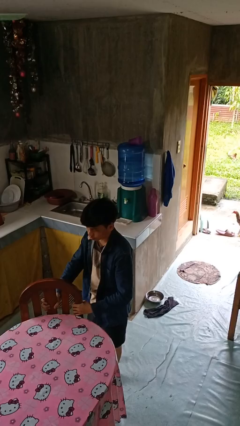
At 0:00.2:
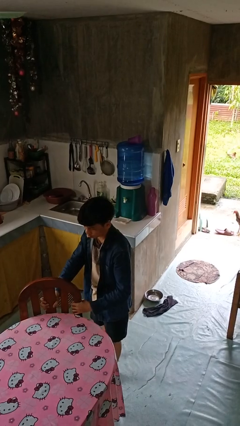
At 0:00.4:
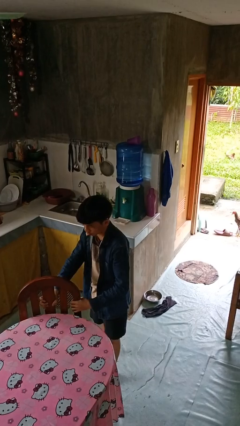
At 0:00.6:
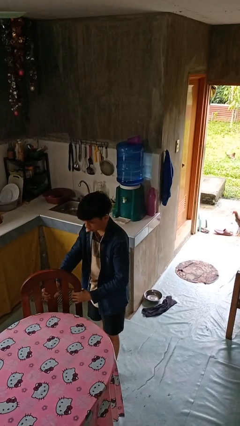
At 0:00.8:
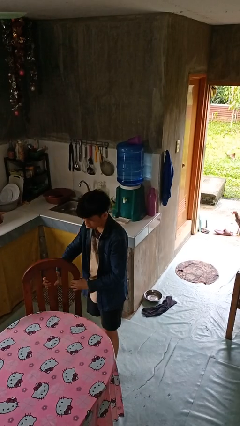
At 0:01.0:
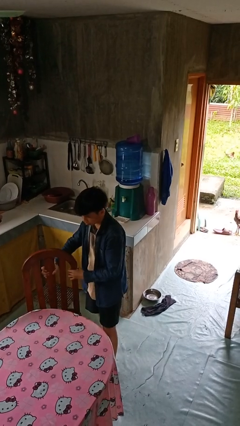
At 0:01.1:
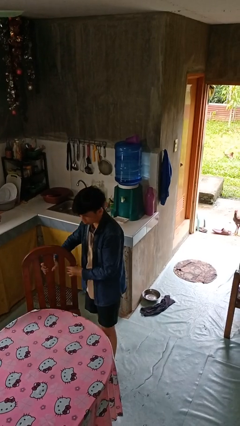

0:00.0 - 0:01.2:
person pulls out chair

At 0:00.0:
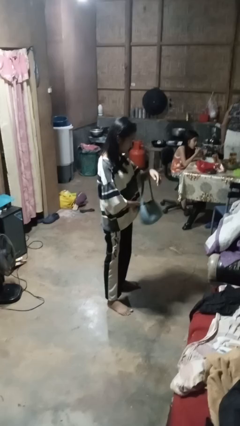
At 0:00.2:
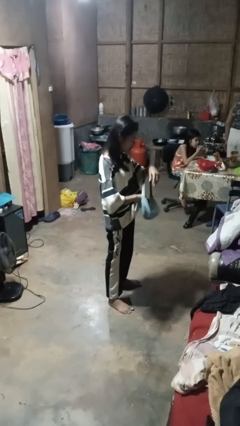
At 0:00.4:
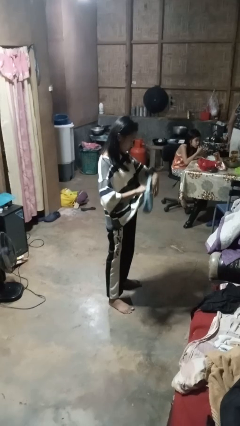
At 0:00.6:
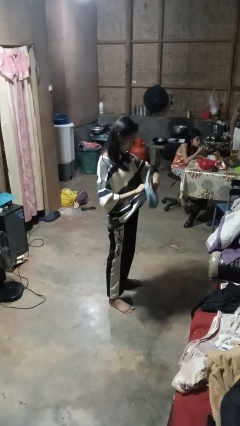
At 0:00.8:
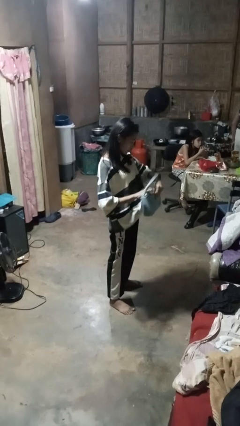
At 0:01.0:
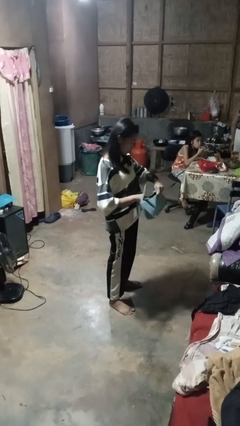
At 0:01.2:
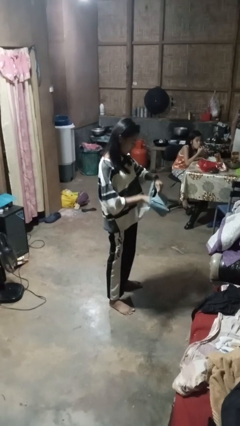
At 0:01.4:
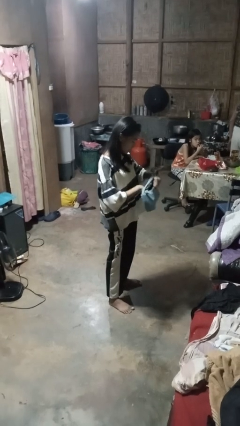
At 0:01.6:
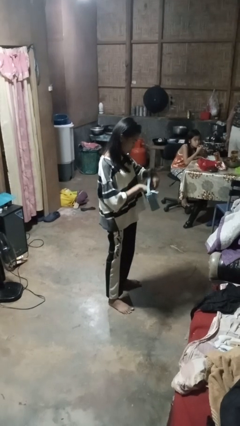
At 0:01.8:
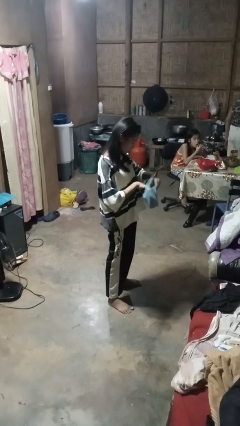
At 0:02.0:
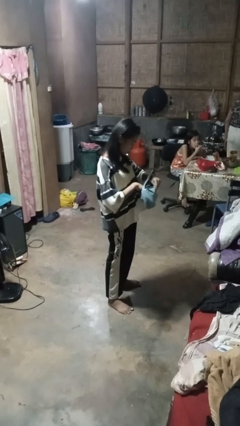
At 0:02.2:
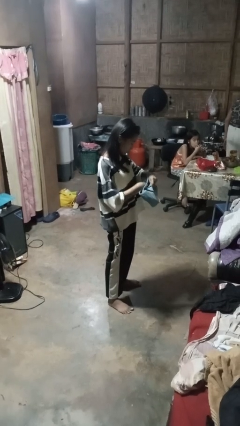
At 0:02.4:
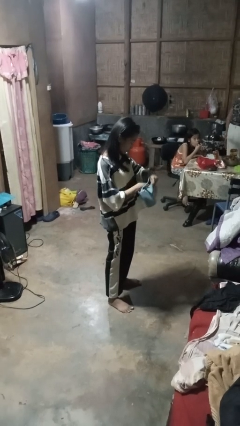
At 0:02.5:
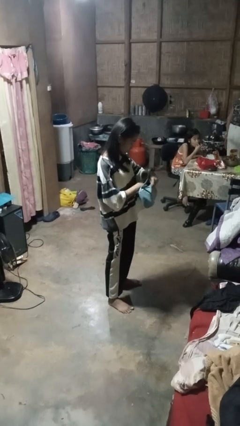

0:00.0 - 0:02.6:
person searches in purse

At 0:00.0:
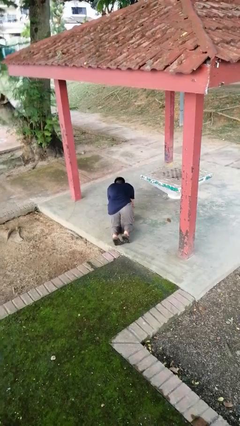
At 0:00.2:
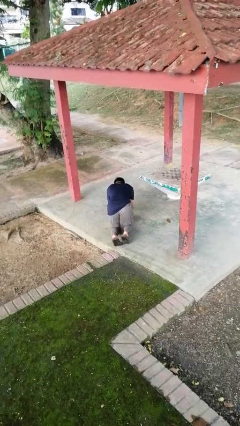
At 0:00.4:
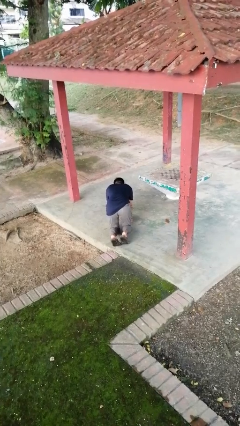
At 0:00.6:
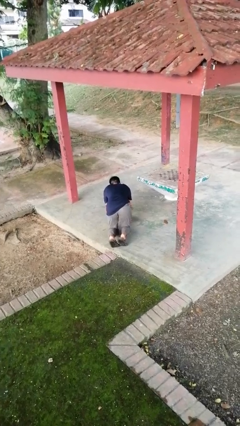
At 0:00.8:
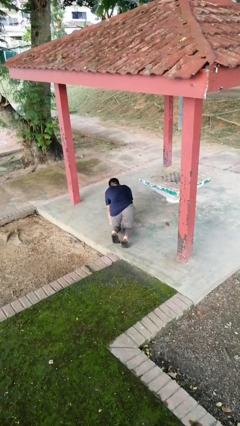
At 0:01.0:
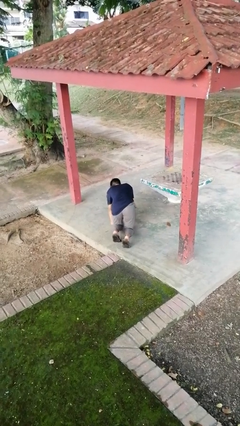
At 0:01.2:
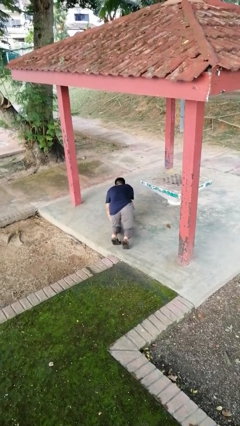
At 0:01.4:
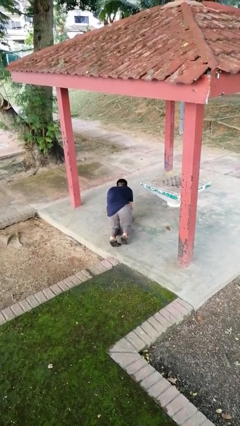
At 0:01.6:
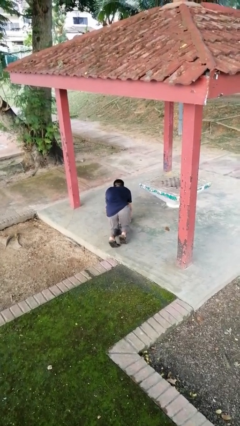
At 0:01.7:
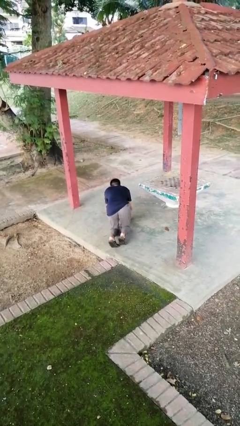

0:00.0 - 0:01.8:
person crawls

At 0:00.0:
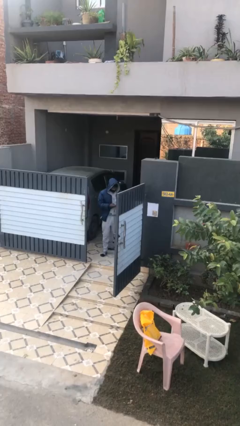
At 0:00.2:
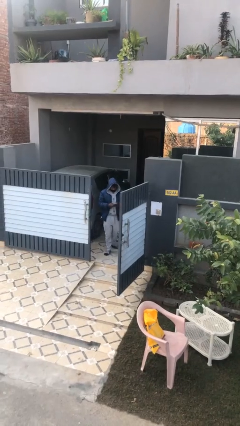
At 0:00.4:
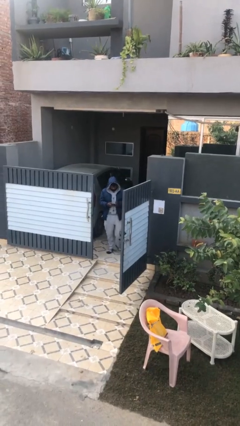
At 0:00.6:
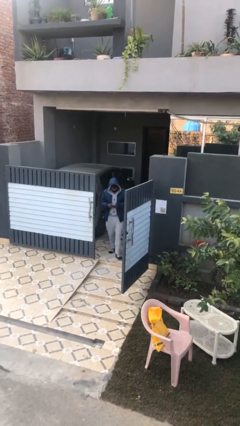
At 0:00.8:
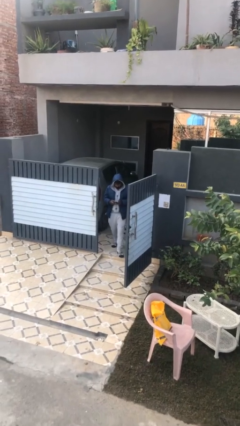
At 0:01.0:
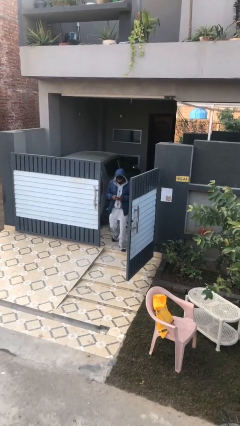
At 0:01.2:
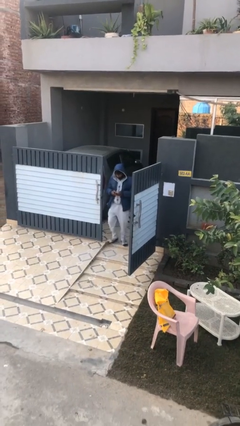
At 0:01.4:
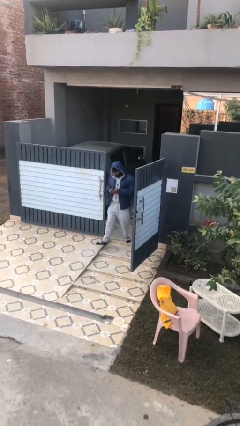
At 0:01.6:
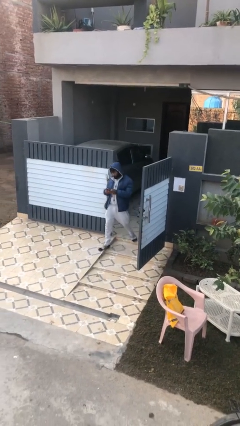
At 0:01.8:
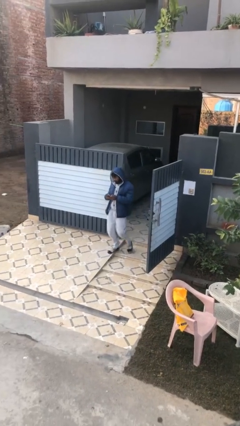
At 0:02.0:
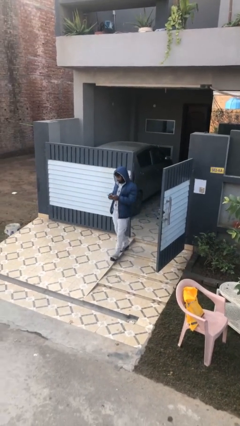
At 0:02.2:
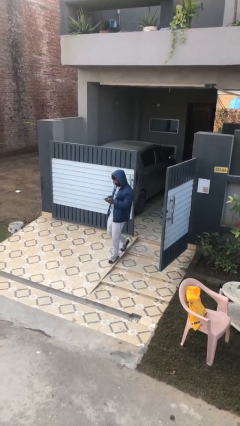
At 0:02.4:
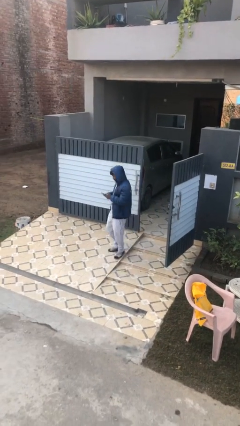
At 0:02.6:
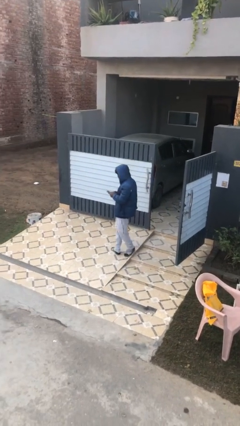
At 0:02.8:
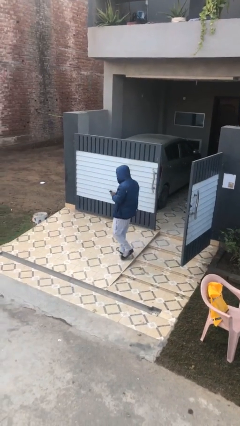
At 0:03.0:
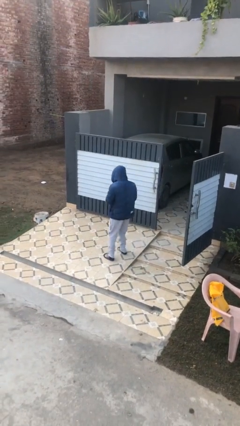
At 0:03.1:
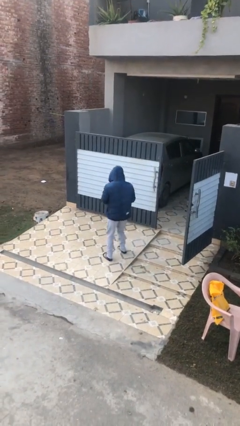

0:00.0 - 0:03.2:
person enters scene through structure

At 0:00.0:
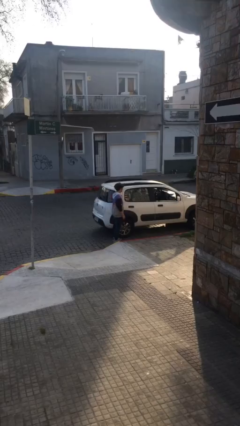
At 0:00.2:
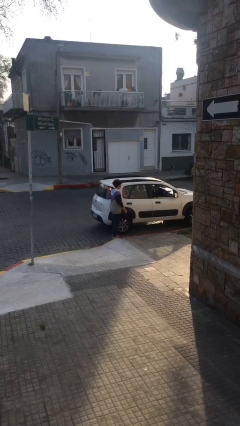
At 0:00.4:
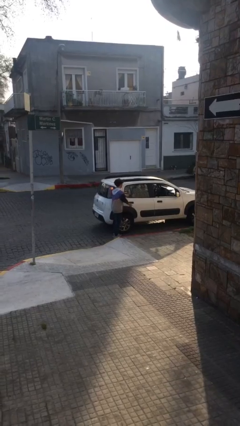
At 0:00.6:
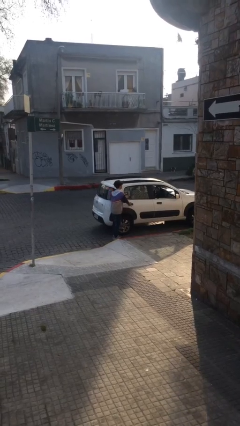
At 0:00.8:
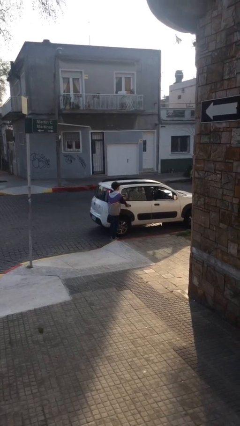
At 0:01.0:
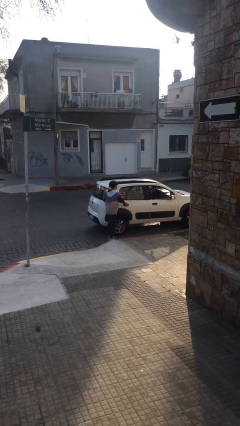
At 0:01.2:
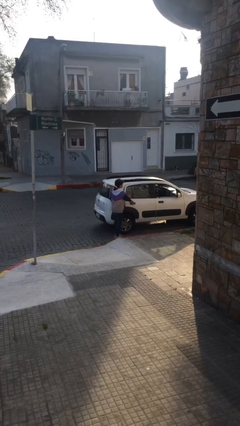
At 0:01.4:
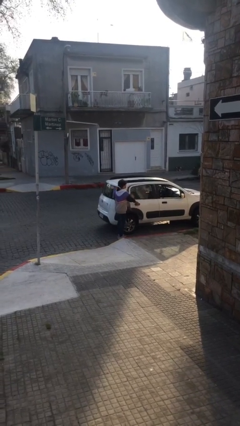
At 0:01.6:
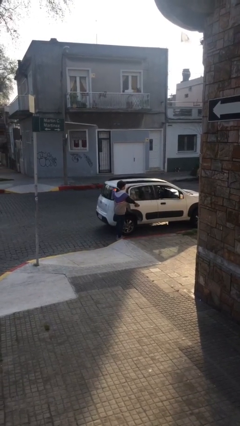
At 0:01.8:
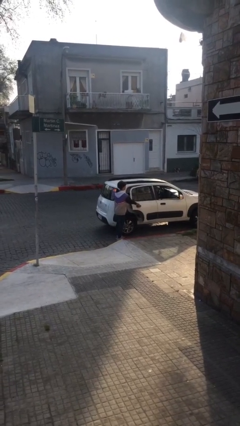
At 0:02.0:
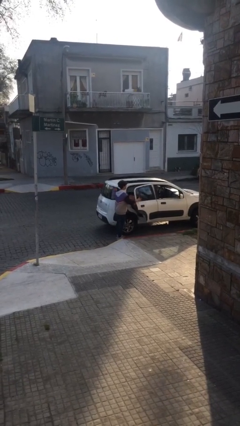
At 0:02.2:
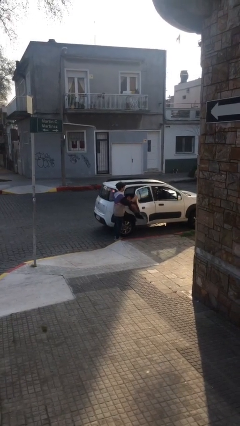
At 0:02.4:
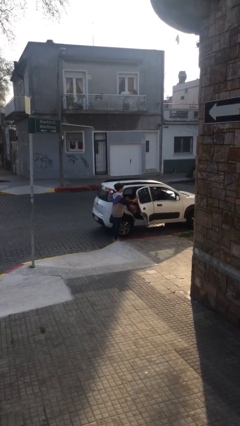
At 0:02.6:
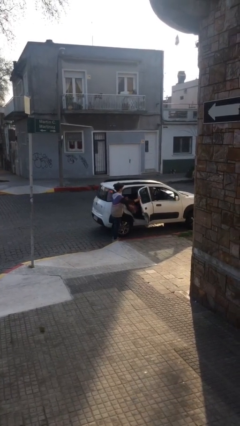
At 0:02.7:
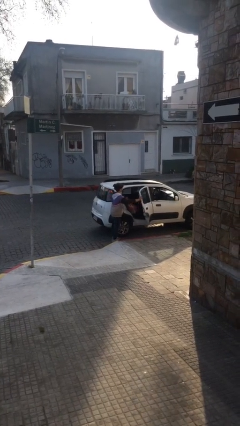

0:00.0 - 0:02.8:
person opens car door

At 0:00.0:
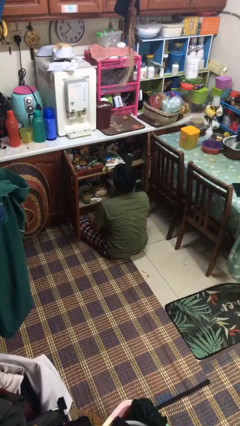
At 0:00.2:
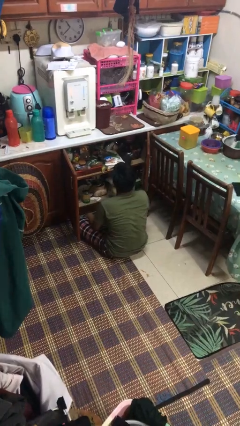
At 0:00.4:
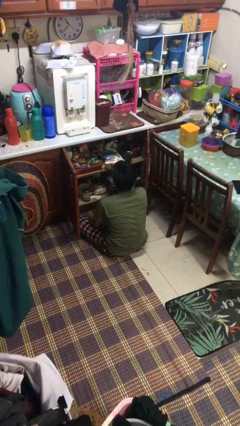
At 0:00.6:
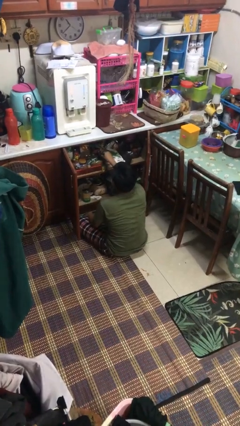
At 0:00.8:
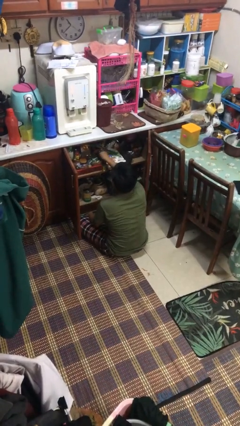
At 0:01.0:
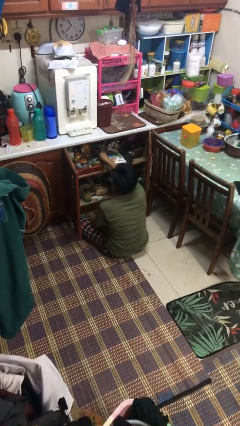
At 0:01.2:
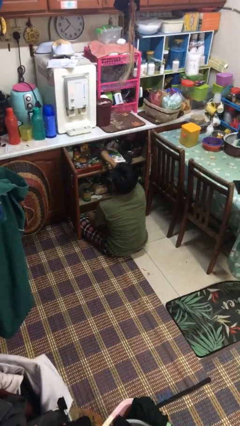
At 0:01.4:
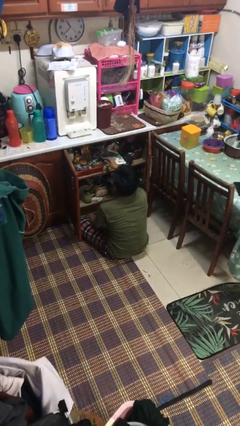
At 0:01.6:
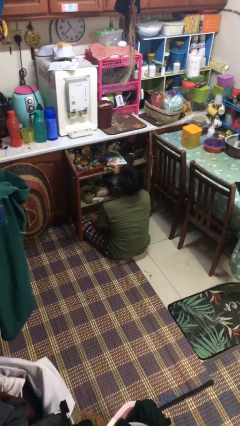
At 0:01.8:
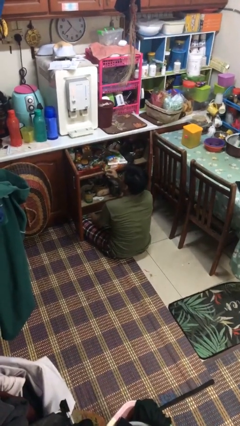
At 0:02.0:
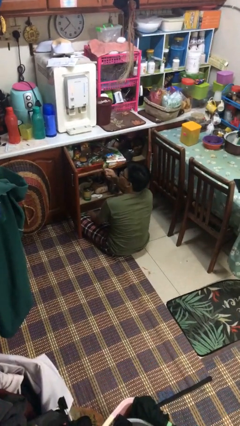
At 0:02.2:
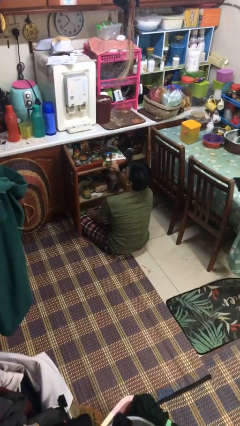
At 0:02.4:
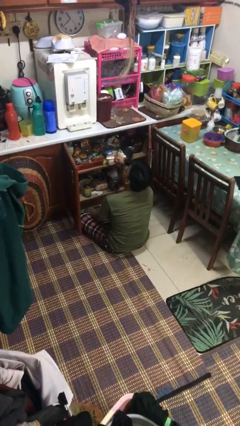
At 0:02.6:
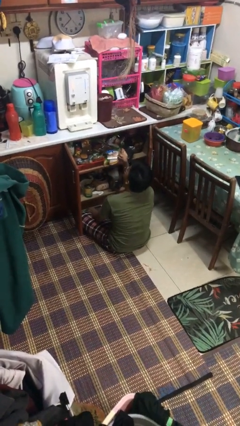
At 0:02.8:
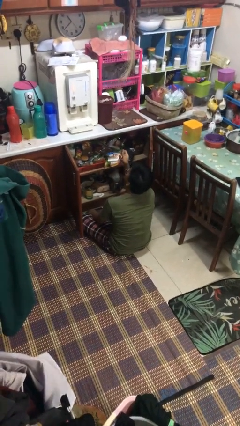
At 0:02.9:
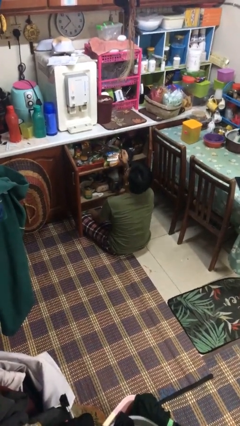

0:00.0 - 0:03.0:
person takes object from kitchen drawer

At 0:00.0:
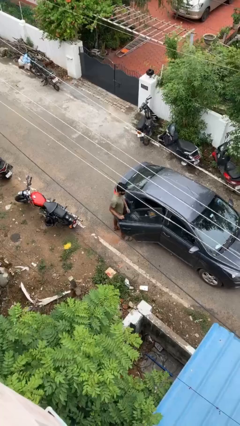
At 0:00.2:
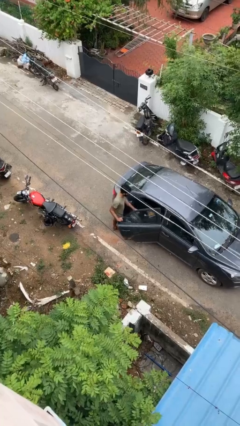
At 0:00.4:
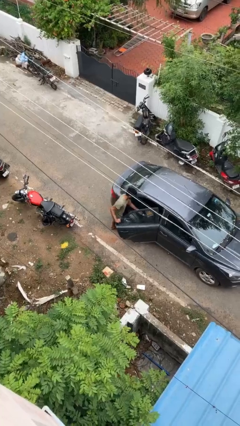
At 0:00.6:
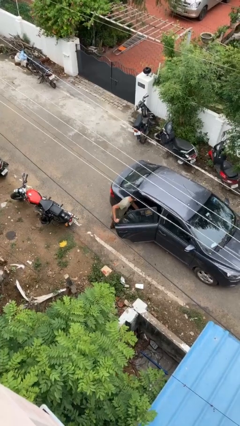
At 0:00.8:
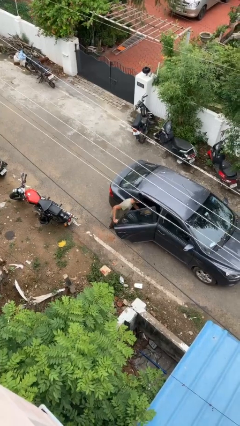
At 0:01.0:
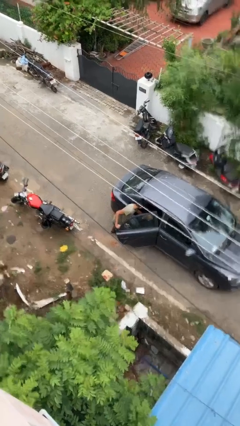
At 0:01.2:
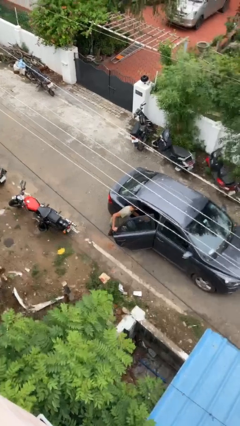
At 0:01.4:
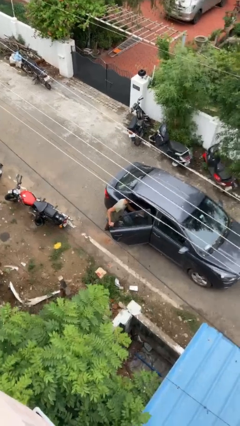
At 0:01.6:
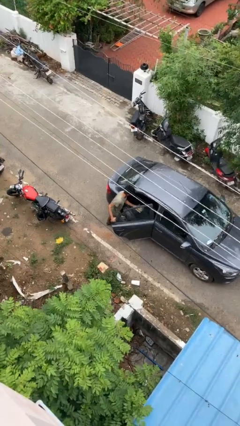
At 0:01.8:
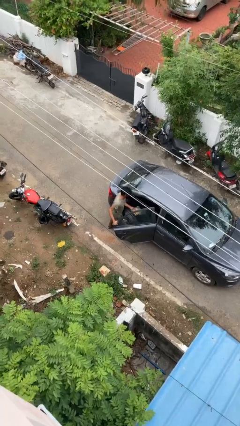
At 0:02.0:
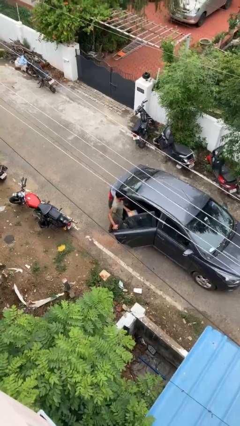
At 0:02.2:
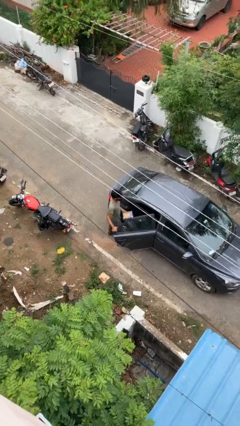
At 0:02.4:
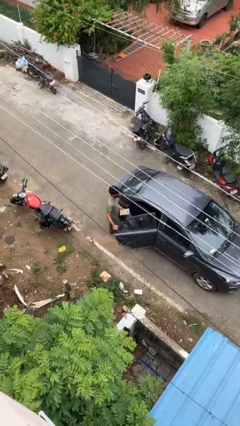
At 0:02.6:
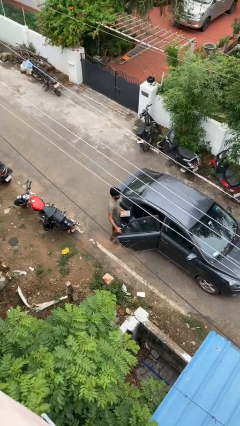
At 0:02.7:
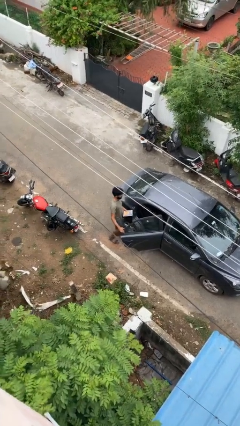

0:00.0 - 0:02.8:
person unloads car
